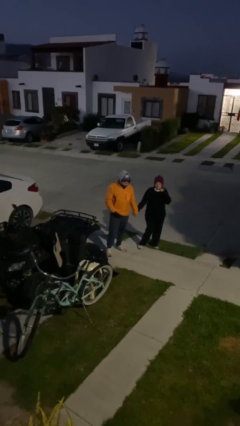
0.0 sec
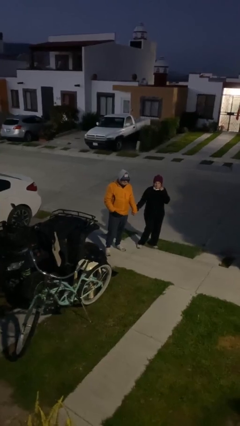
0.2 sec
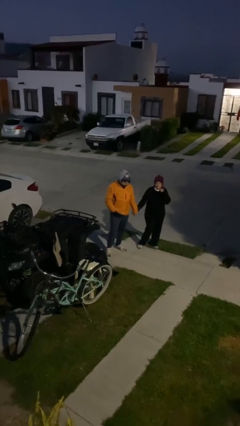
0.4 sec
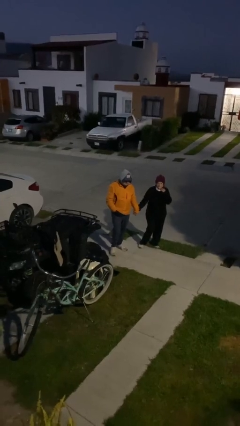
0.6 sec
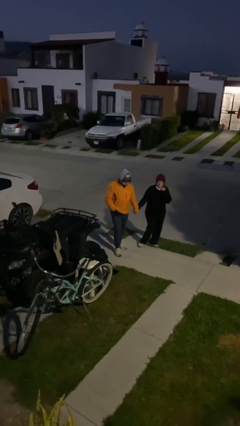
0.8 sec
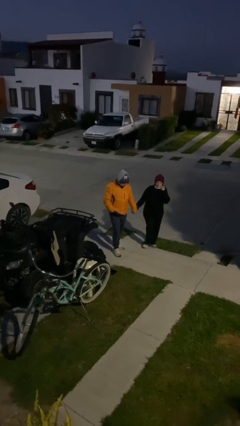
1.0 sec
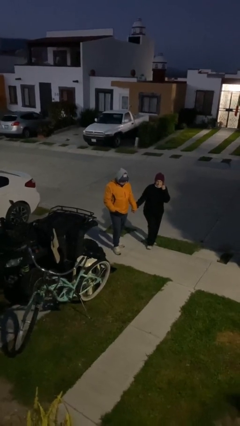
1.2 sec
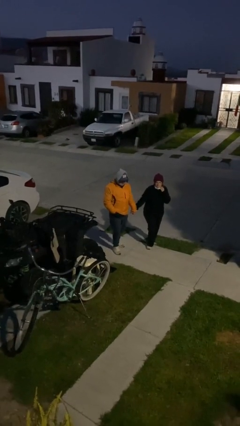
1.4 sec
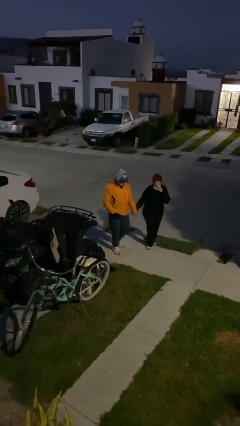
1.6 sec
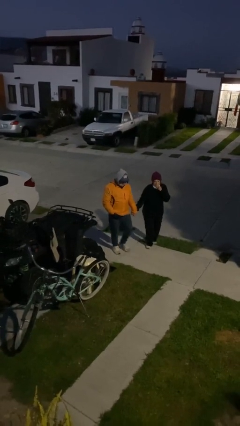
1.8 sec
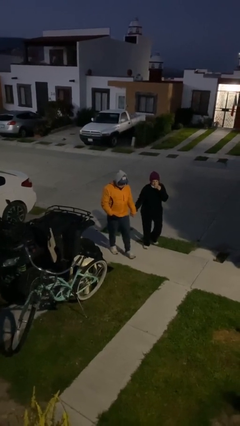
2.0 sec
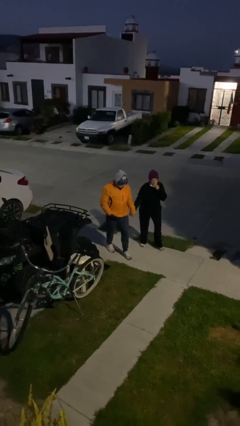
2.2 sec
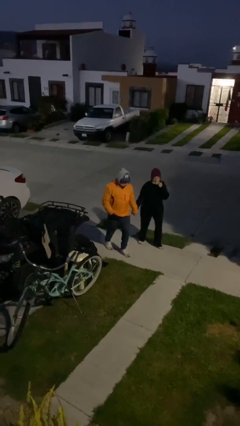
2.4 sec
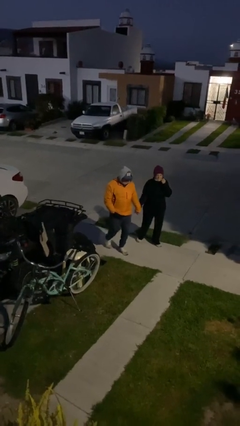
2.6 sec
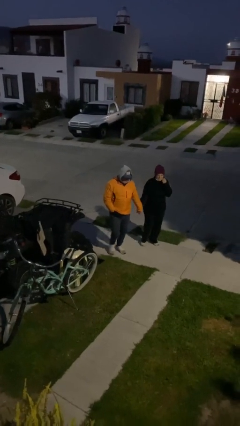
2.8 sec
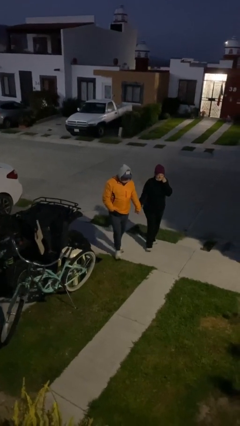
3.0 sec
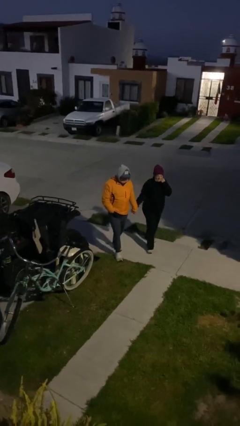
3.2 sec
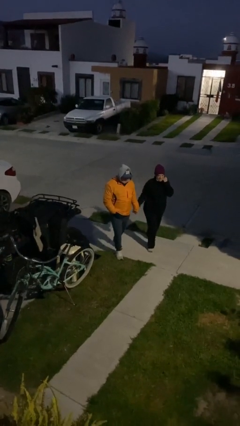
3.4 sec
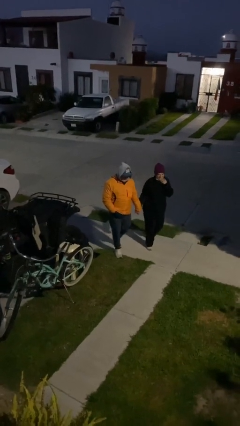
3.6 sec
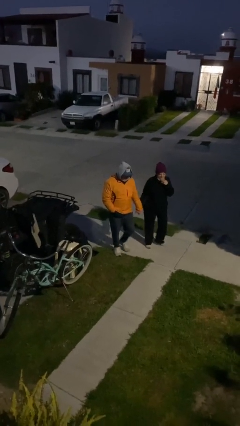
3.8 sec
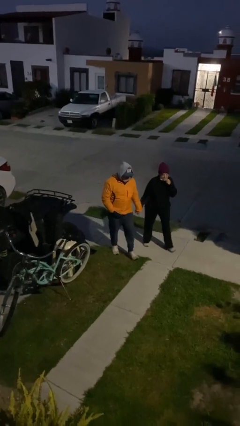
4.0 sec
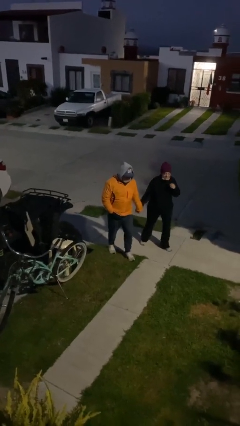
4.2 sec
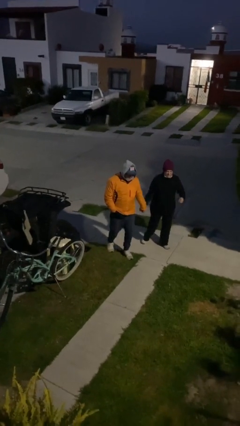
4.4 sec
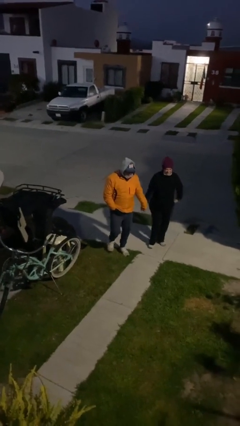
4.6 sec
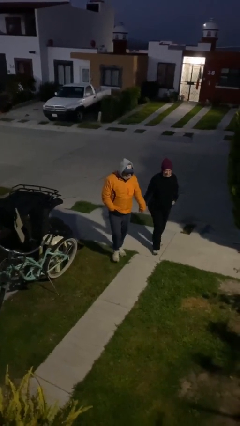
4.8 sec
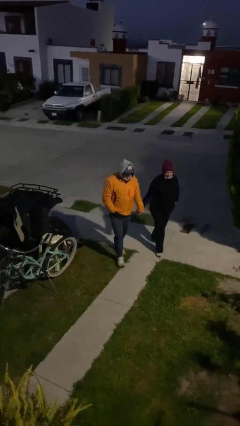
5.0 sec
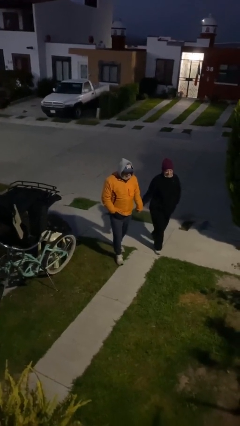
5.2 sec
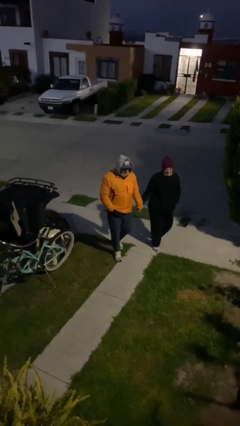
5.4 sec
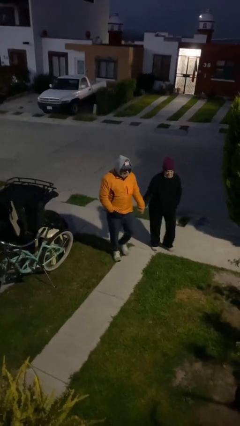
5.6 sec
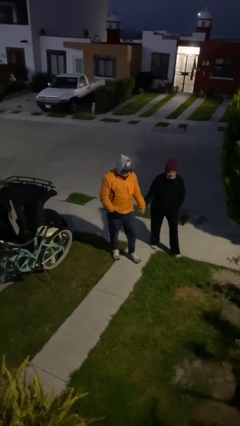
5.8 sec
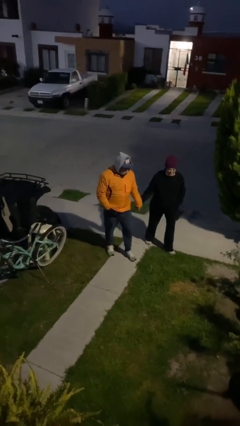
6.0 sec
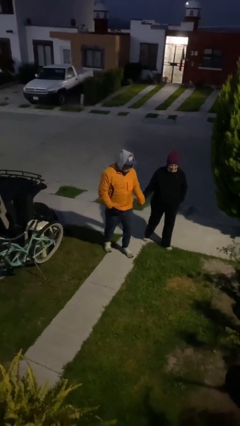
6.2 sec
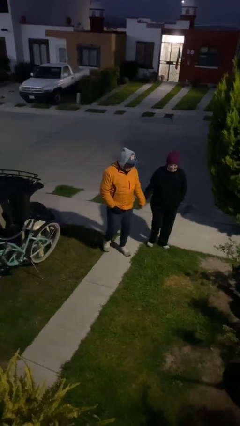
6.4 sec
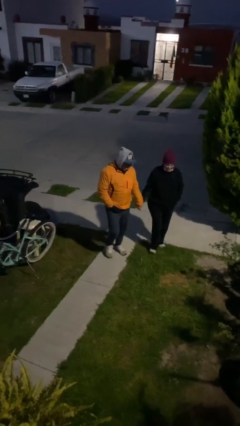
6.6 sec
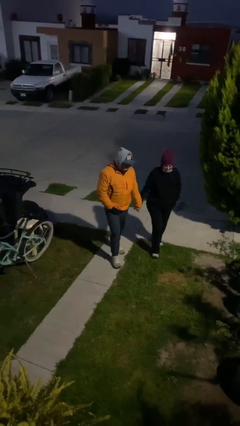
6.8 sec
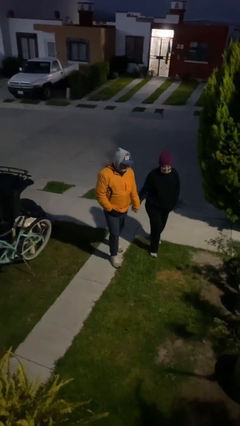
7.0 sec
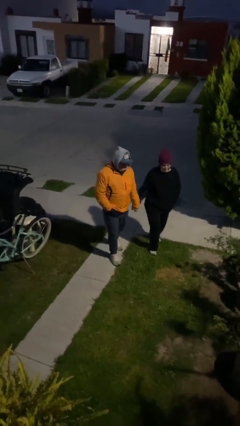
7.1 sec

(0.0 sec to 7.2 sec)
person holds hand

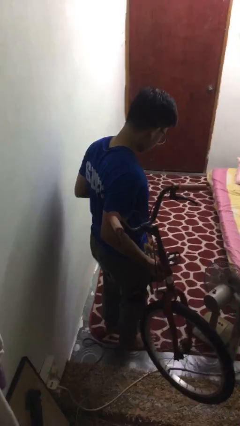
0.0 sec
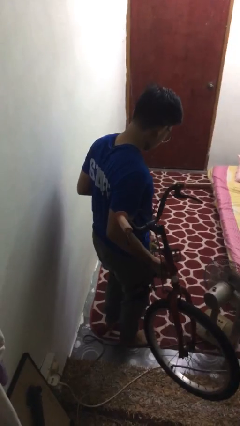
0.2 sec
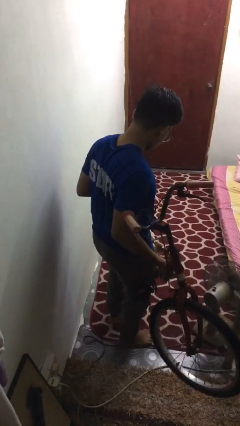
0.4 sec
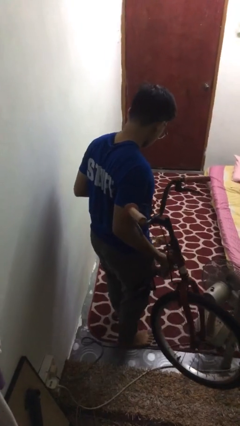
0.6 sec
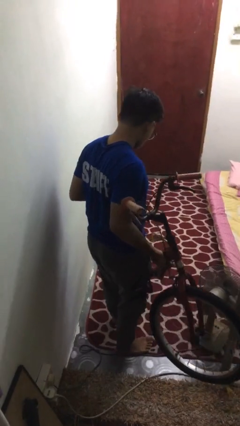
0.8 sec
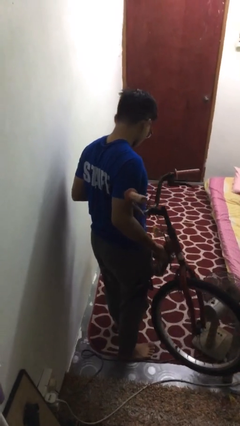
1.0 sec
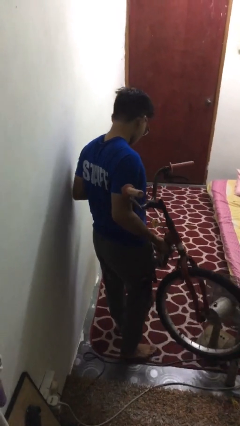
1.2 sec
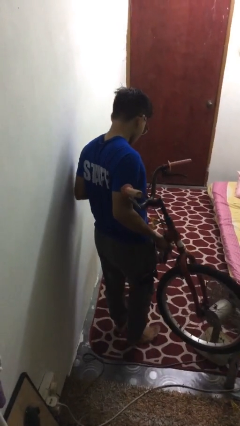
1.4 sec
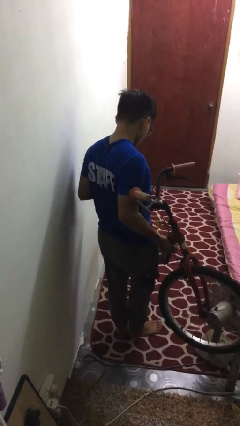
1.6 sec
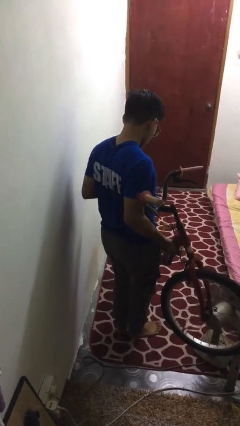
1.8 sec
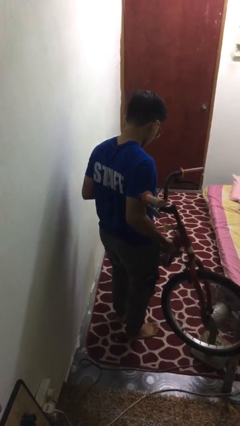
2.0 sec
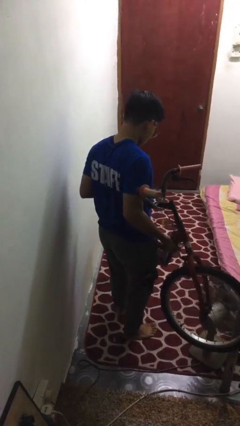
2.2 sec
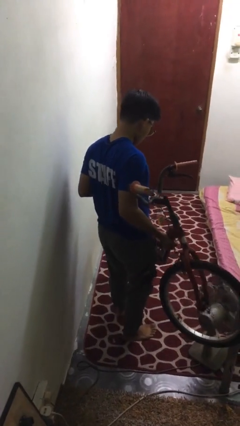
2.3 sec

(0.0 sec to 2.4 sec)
person carries bicycle

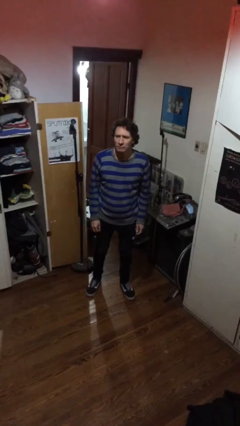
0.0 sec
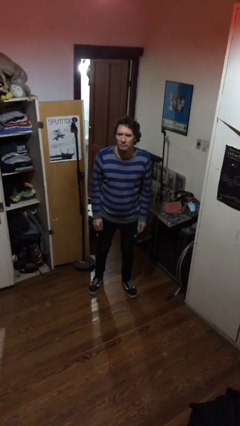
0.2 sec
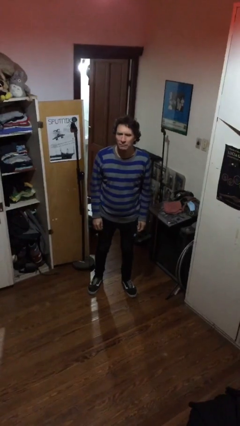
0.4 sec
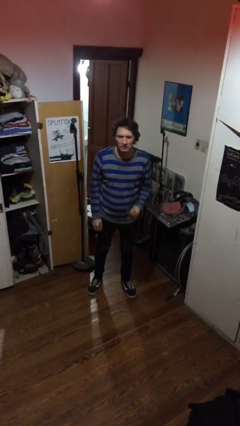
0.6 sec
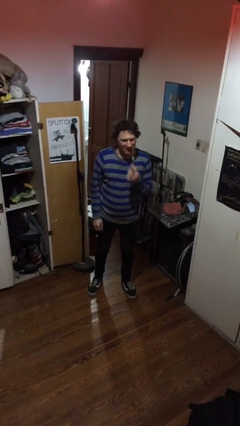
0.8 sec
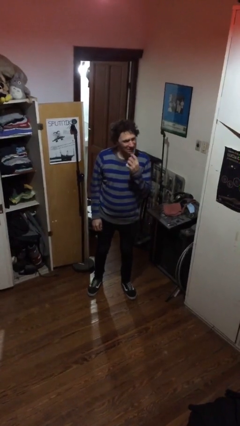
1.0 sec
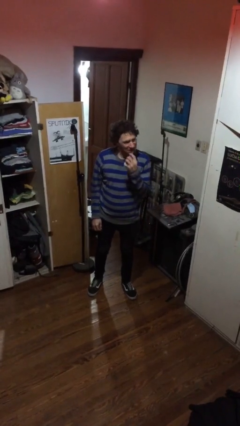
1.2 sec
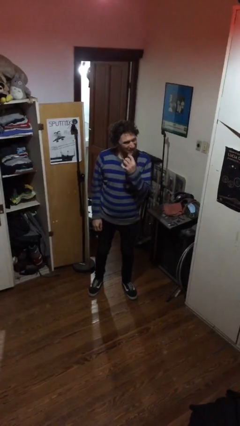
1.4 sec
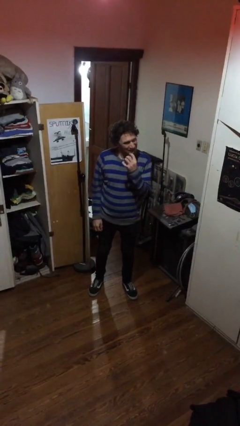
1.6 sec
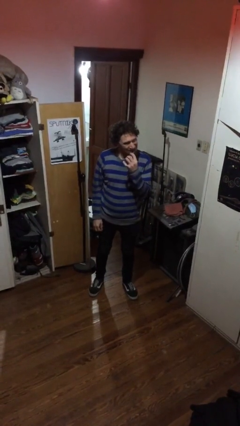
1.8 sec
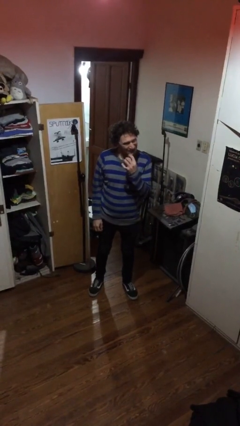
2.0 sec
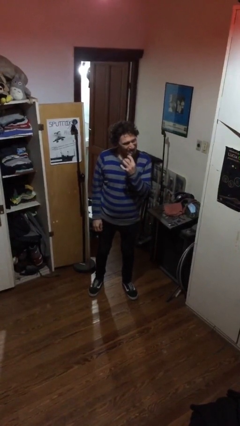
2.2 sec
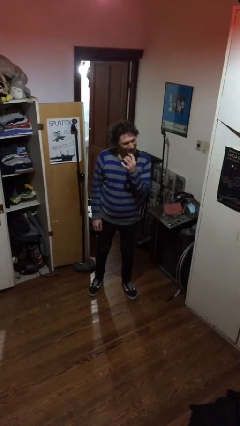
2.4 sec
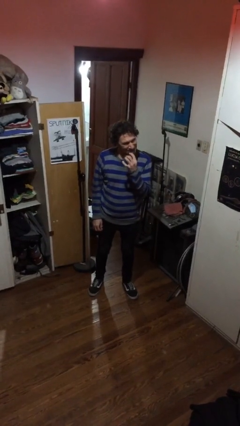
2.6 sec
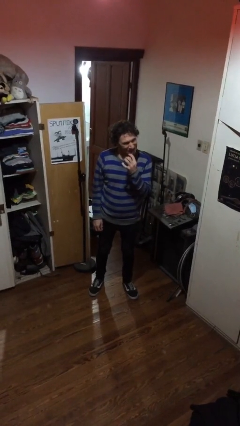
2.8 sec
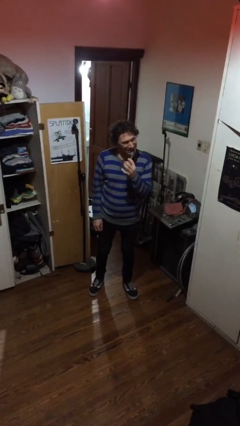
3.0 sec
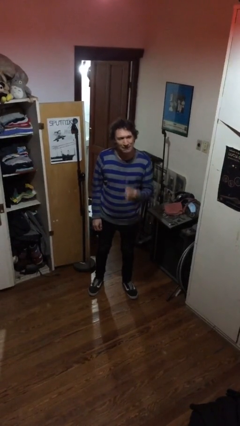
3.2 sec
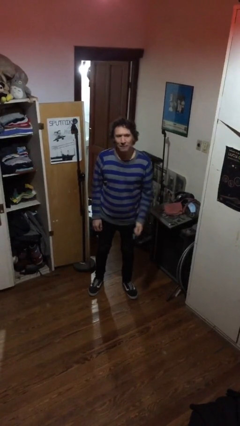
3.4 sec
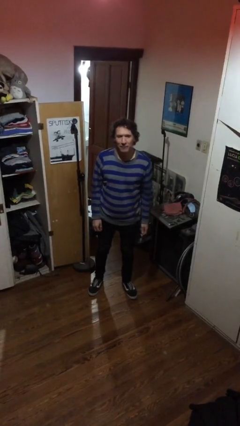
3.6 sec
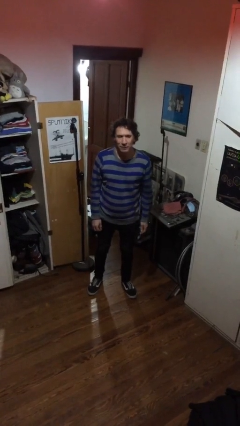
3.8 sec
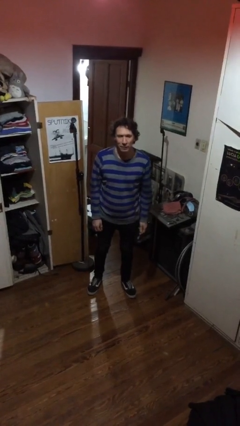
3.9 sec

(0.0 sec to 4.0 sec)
person brushes teeth

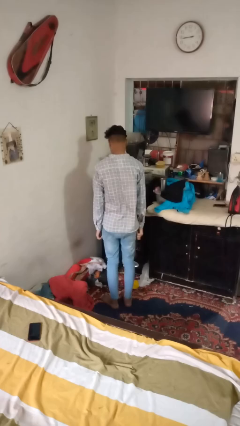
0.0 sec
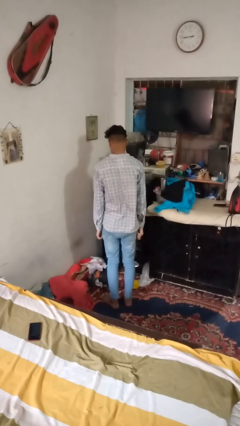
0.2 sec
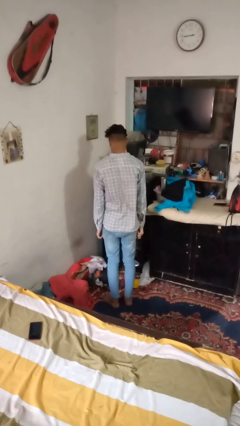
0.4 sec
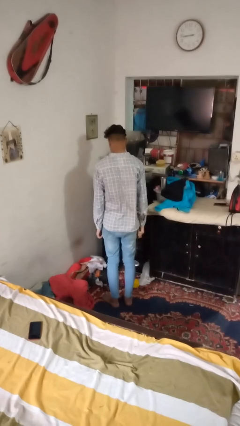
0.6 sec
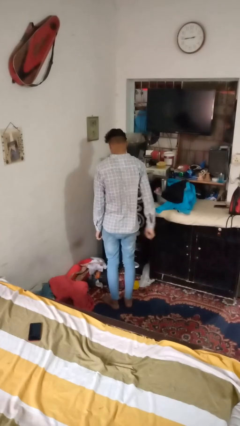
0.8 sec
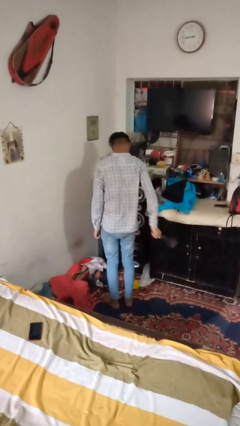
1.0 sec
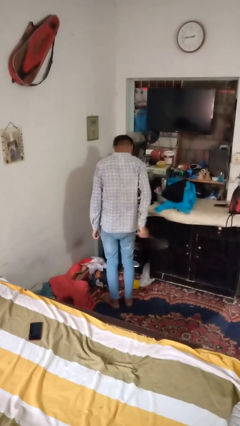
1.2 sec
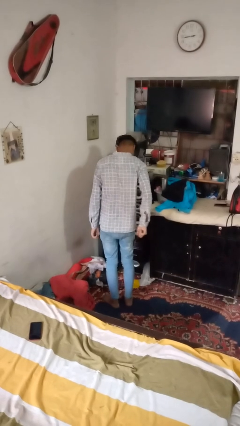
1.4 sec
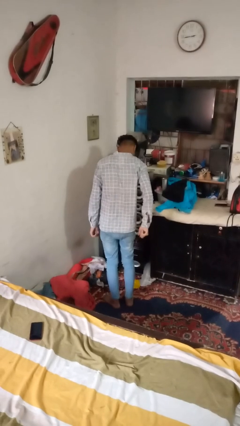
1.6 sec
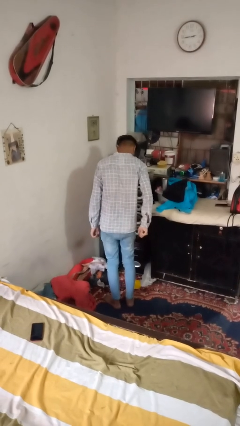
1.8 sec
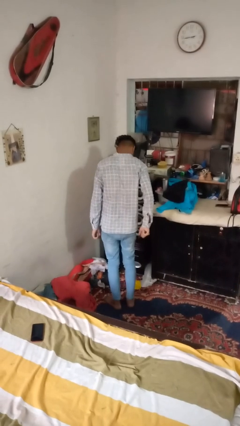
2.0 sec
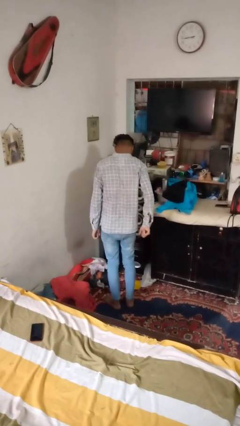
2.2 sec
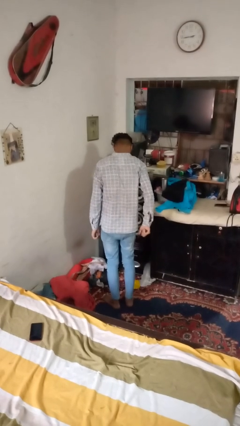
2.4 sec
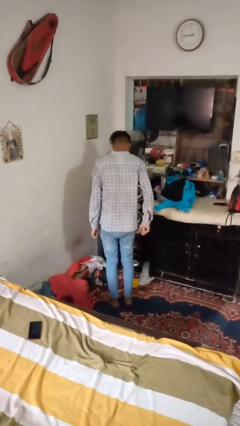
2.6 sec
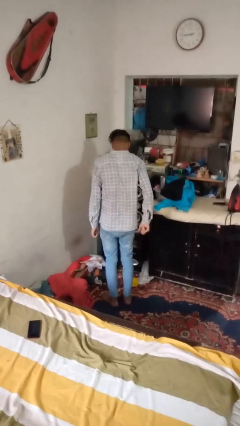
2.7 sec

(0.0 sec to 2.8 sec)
person swats bug

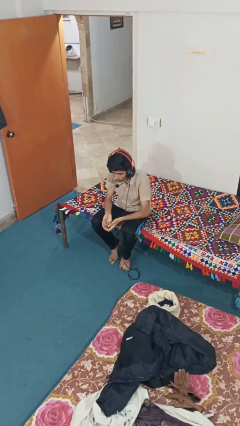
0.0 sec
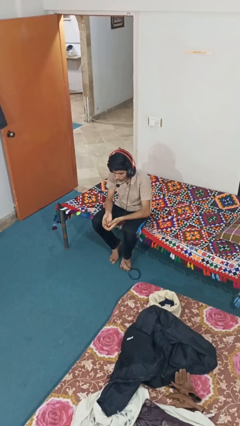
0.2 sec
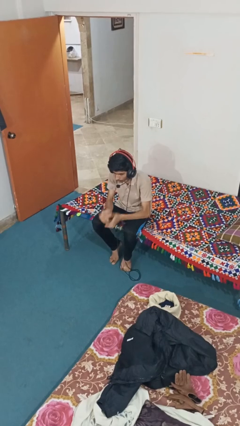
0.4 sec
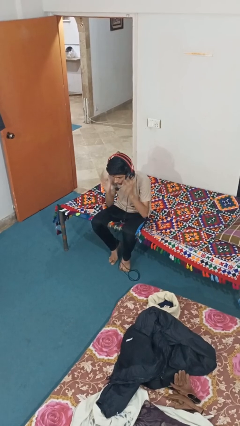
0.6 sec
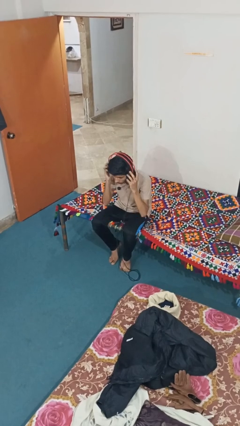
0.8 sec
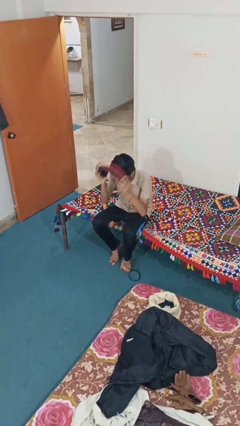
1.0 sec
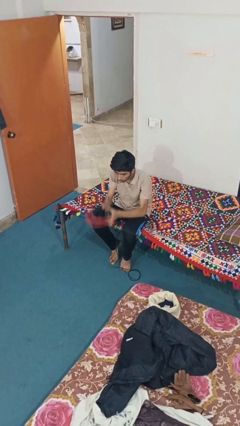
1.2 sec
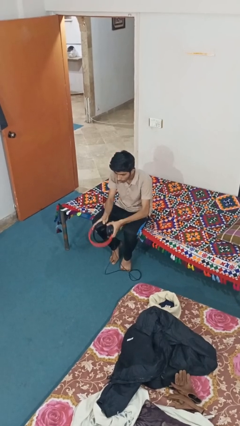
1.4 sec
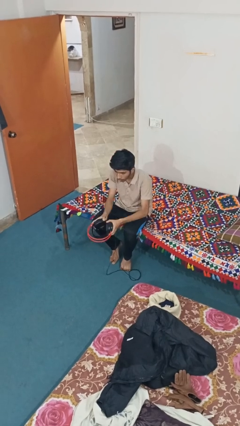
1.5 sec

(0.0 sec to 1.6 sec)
person takes off headphones
